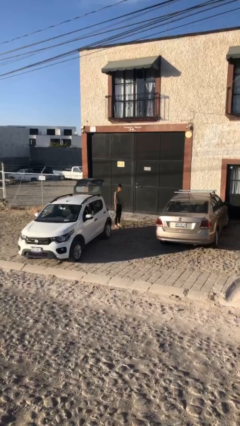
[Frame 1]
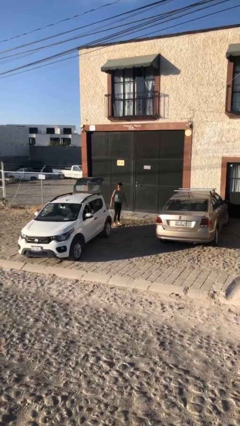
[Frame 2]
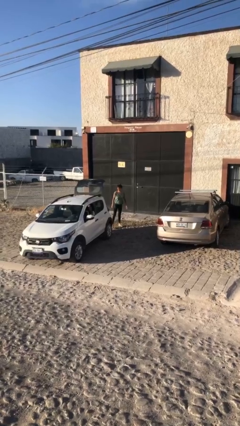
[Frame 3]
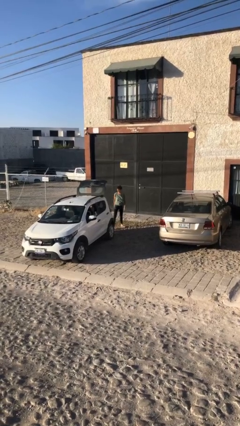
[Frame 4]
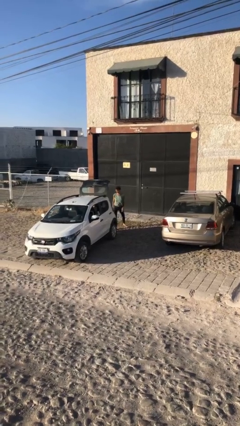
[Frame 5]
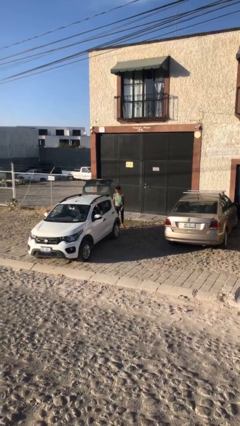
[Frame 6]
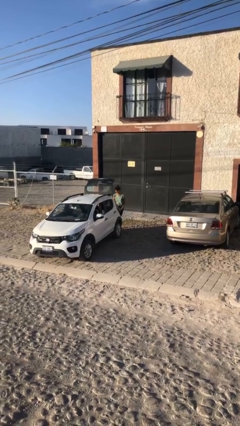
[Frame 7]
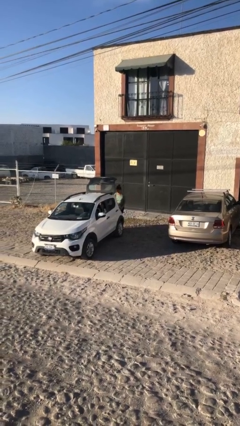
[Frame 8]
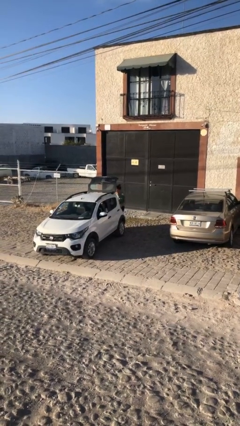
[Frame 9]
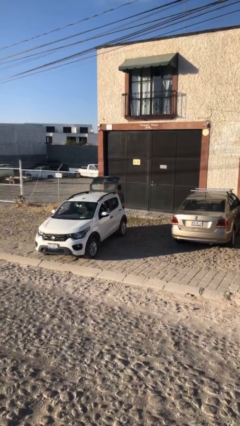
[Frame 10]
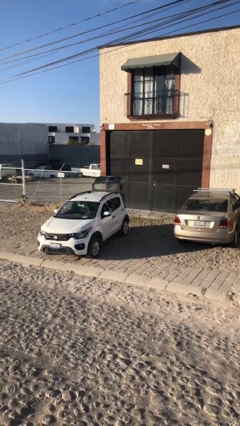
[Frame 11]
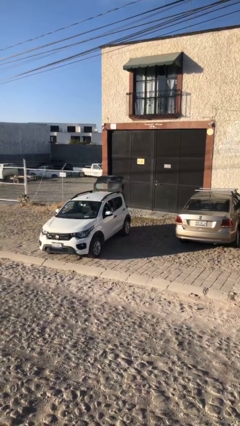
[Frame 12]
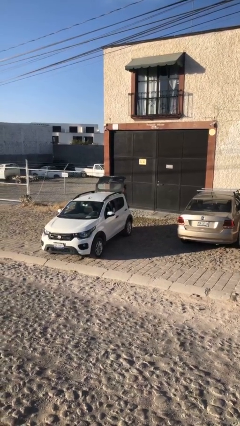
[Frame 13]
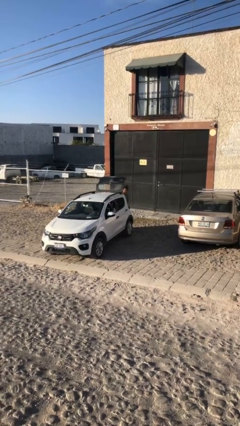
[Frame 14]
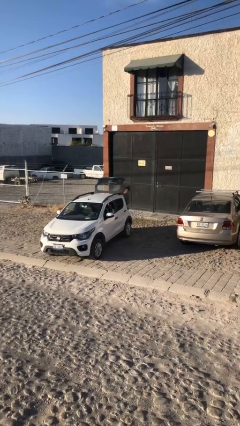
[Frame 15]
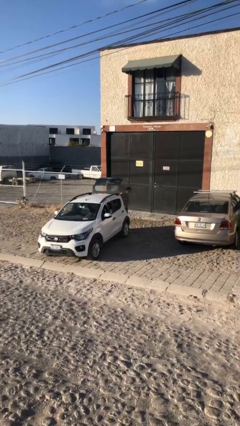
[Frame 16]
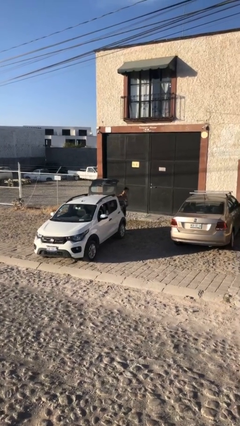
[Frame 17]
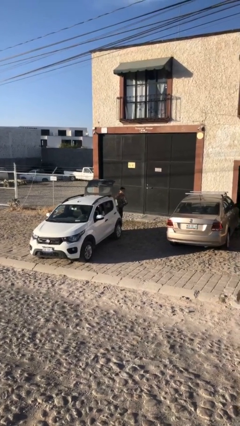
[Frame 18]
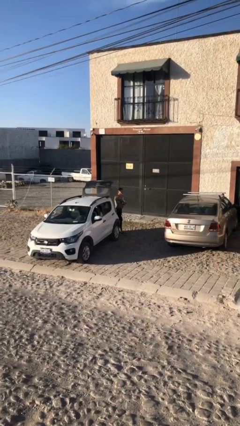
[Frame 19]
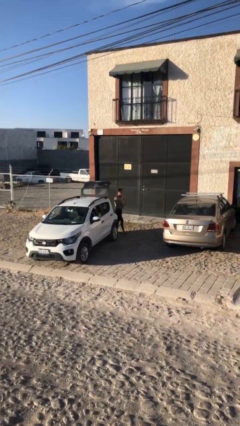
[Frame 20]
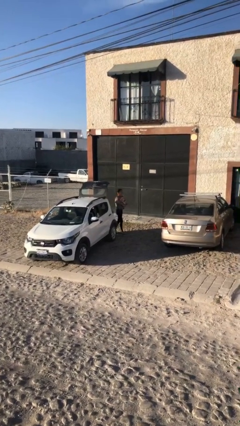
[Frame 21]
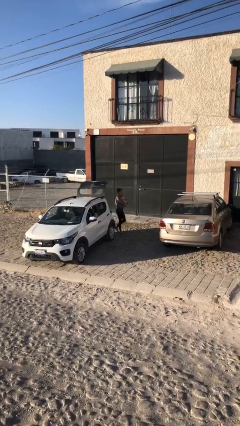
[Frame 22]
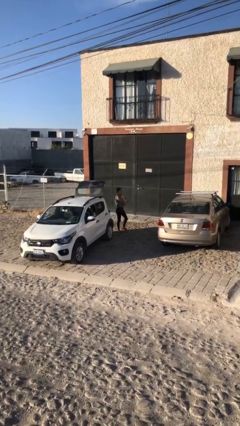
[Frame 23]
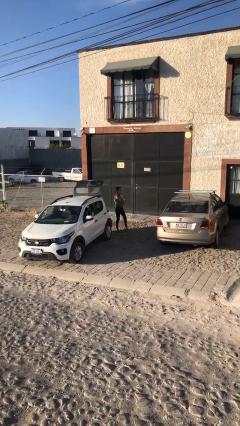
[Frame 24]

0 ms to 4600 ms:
person unloads car

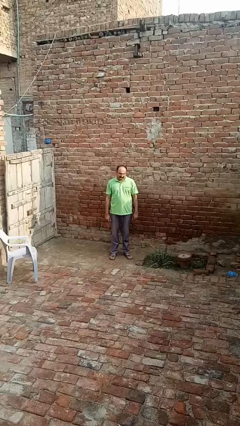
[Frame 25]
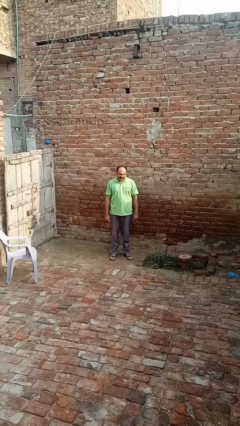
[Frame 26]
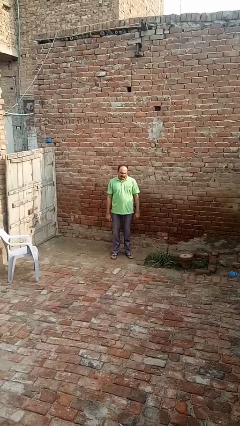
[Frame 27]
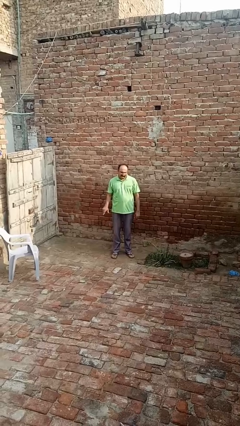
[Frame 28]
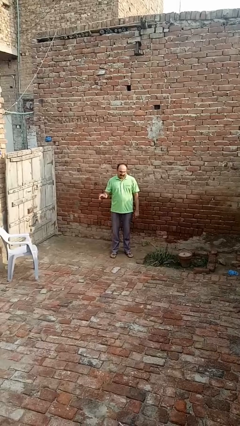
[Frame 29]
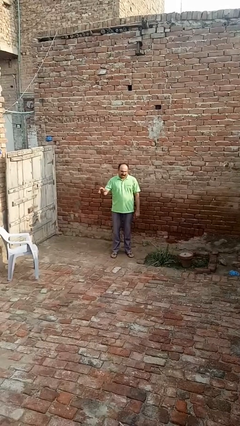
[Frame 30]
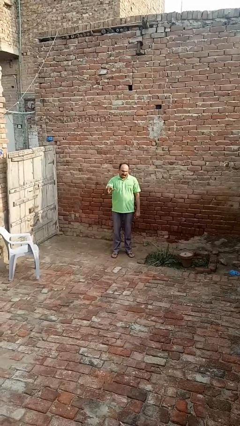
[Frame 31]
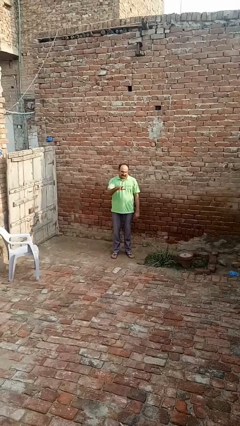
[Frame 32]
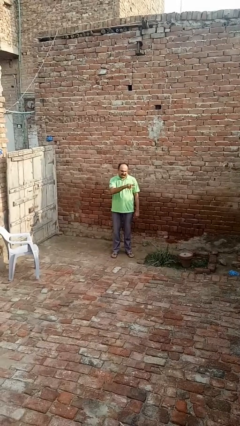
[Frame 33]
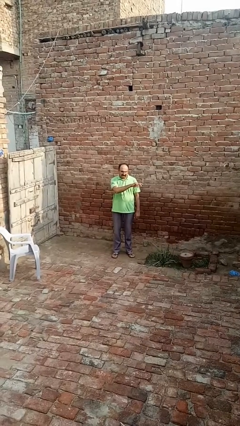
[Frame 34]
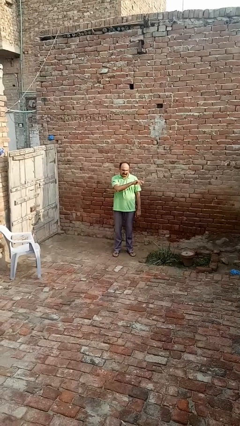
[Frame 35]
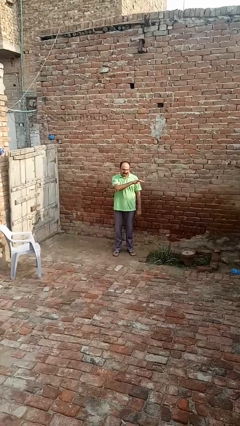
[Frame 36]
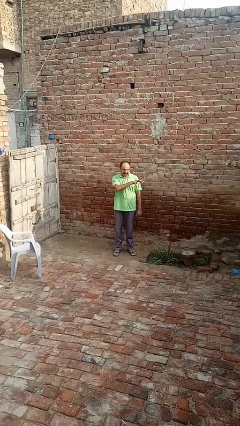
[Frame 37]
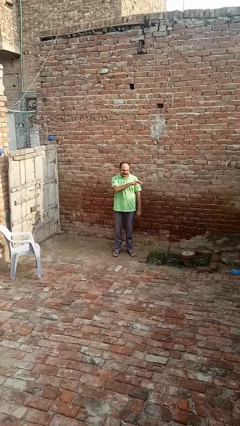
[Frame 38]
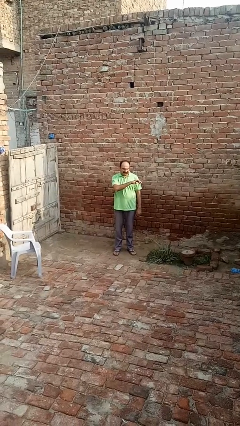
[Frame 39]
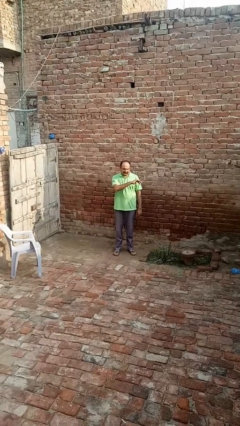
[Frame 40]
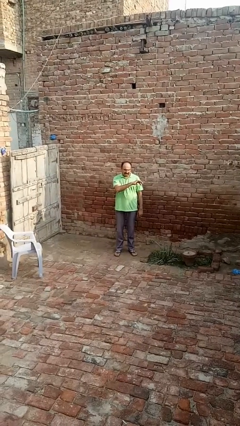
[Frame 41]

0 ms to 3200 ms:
person gestures swipe left

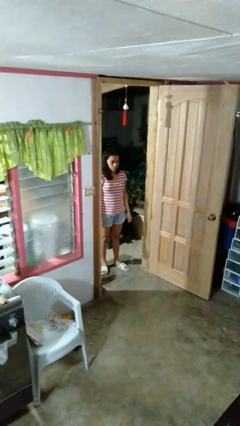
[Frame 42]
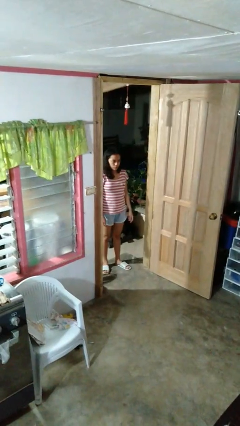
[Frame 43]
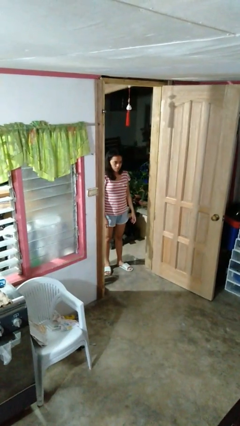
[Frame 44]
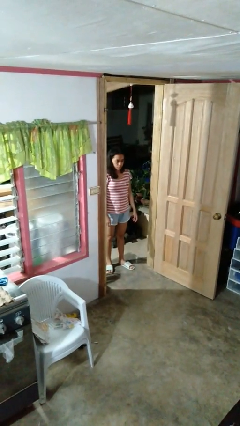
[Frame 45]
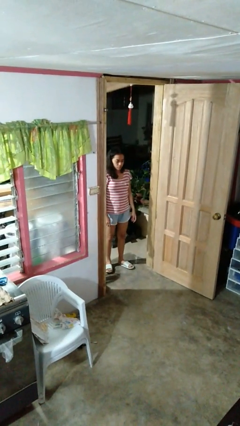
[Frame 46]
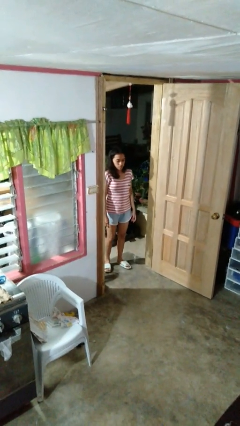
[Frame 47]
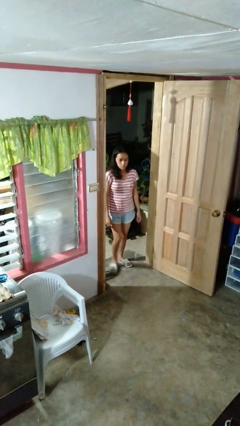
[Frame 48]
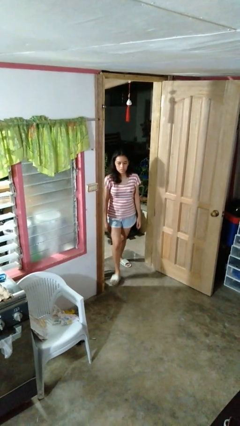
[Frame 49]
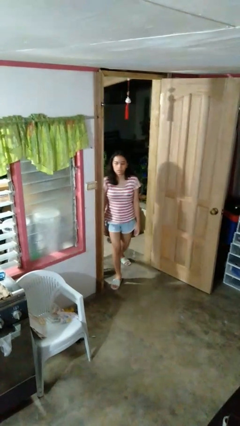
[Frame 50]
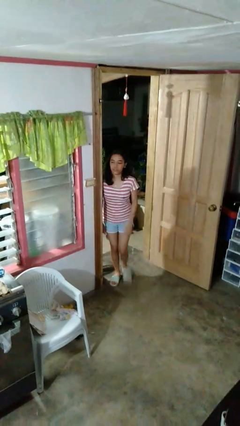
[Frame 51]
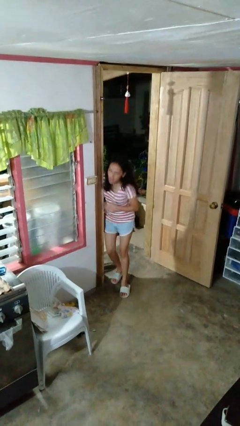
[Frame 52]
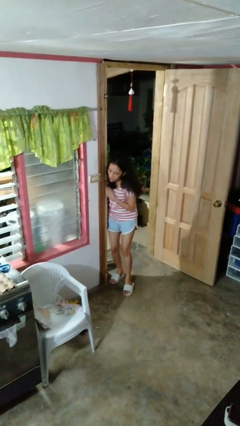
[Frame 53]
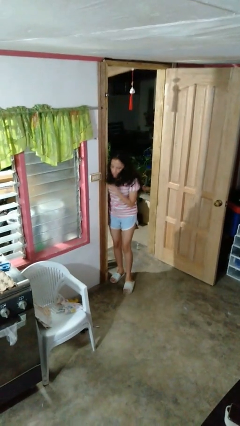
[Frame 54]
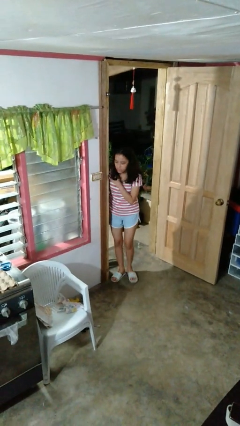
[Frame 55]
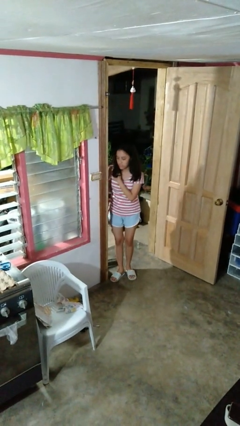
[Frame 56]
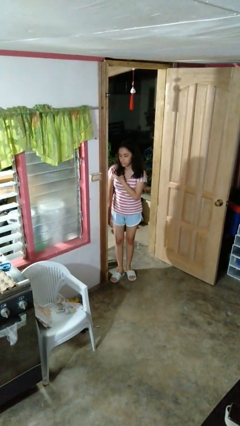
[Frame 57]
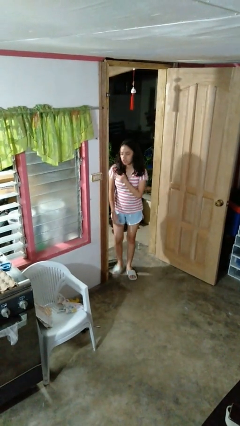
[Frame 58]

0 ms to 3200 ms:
person bumps into wall

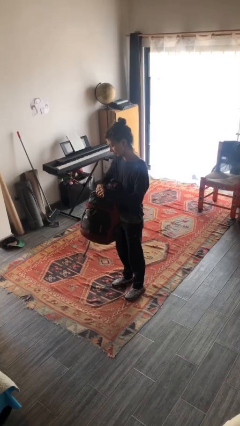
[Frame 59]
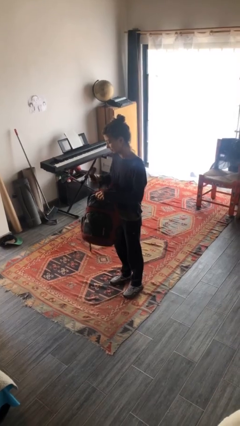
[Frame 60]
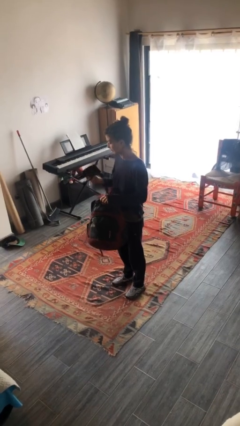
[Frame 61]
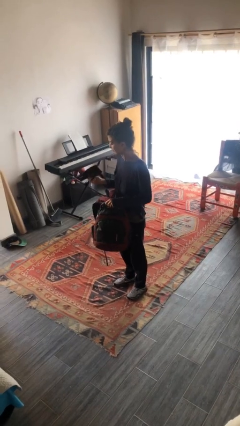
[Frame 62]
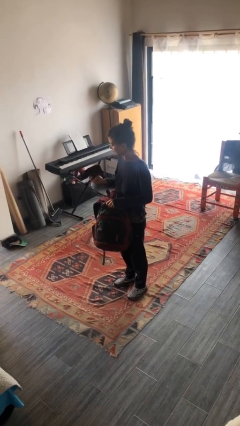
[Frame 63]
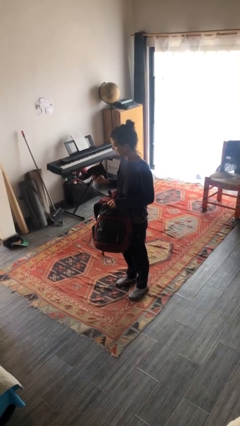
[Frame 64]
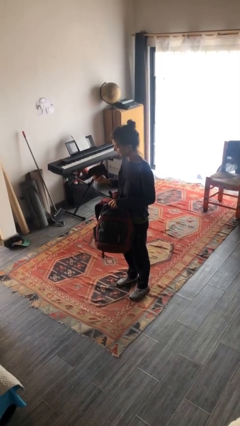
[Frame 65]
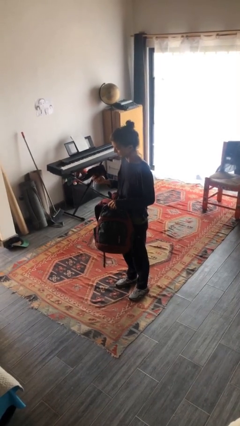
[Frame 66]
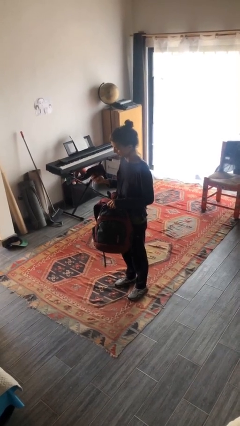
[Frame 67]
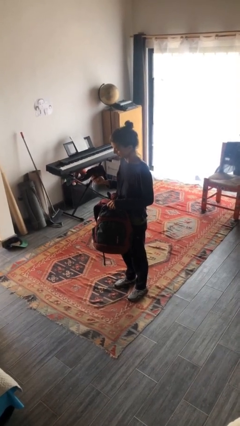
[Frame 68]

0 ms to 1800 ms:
person takes object from backpack

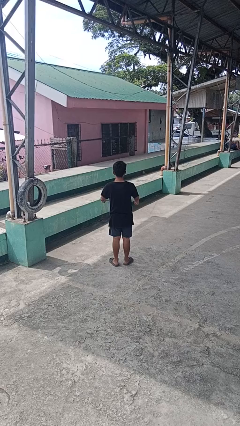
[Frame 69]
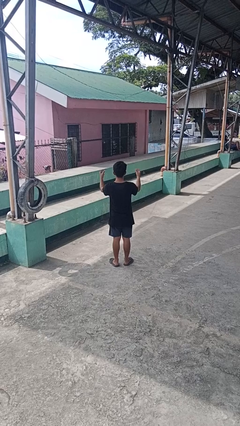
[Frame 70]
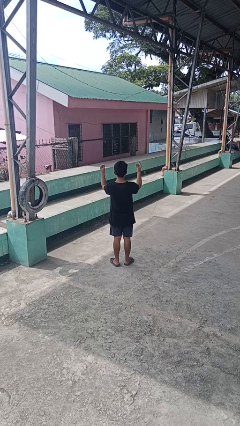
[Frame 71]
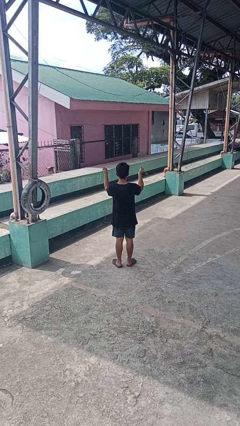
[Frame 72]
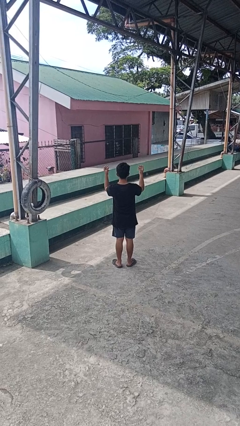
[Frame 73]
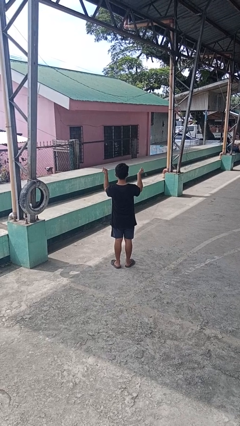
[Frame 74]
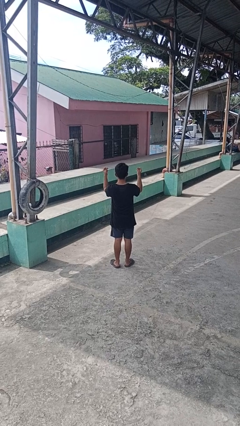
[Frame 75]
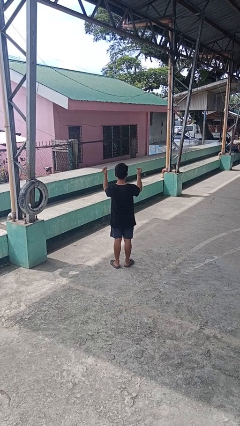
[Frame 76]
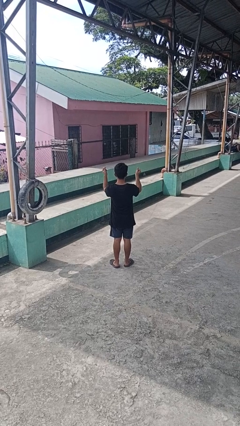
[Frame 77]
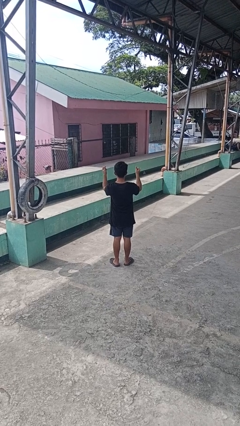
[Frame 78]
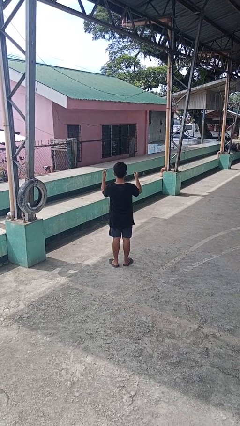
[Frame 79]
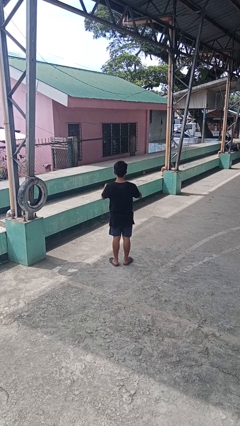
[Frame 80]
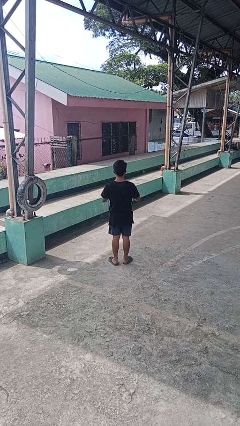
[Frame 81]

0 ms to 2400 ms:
person snaps fingers

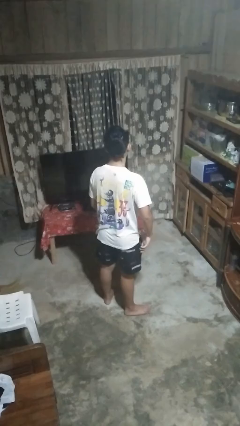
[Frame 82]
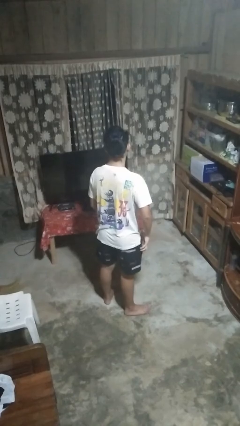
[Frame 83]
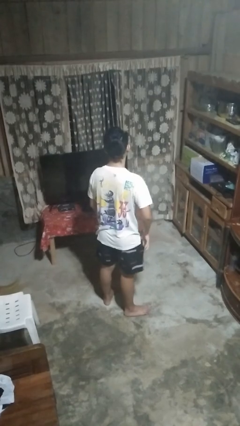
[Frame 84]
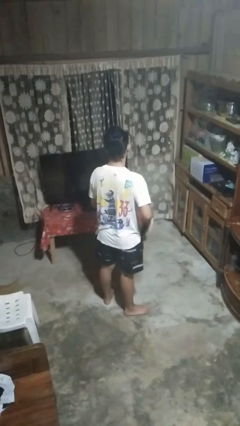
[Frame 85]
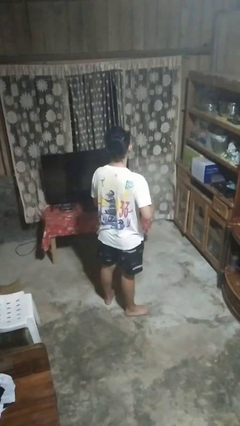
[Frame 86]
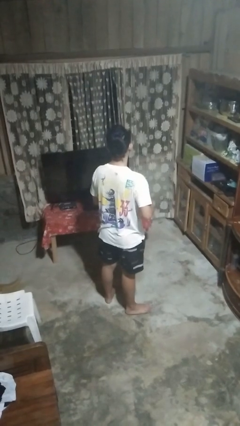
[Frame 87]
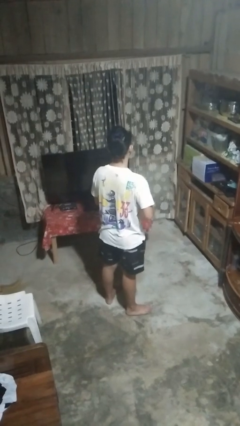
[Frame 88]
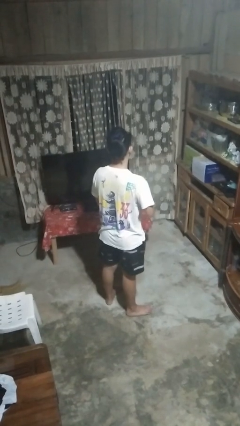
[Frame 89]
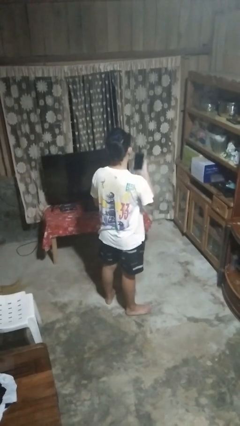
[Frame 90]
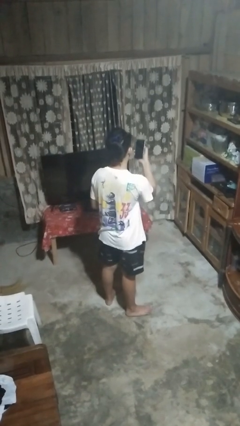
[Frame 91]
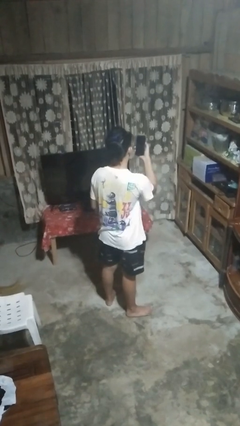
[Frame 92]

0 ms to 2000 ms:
person takes phone from pocket

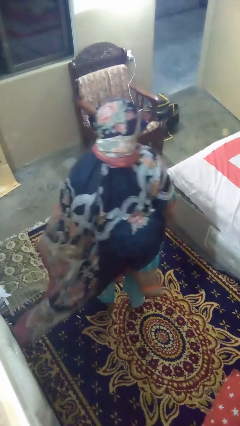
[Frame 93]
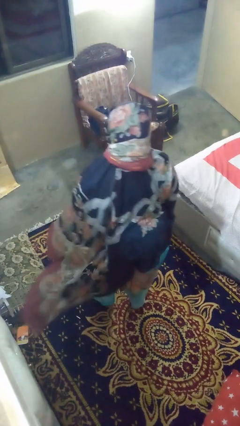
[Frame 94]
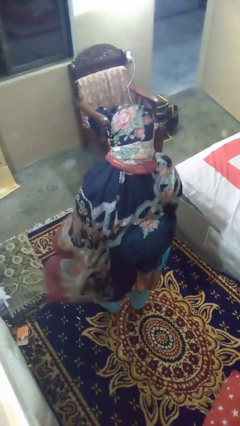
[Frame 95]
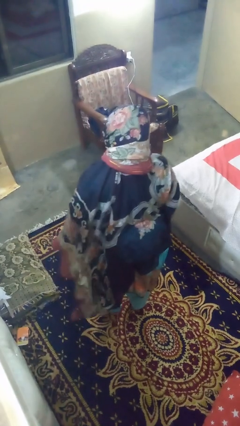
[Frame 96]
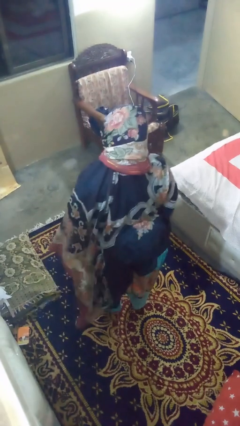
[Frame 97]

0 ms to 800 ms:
person exercises with pushup
